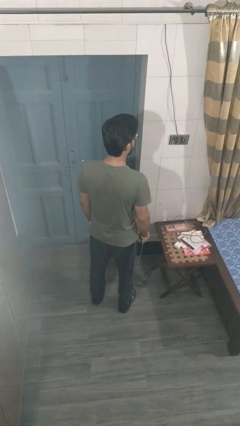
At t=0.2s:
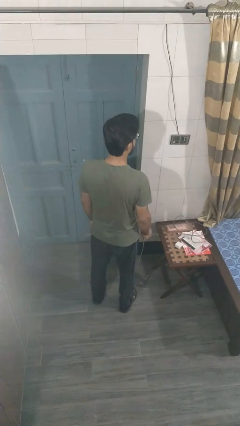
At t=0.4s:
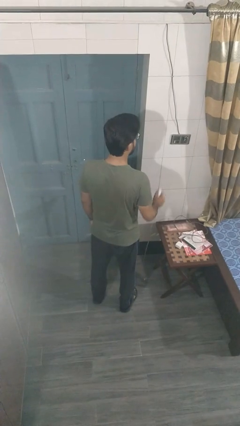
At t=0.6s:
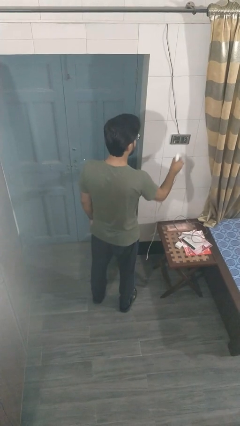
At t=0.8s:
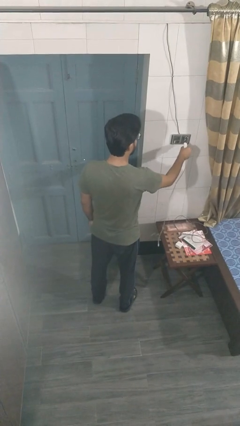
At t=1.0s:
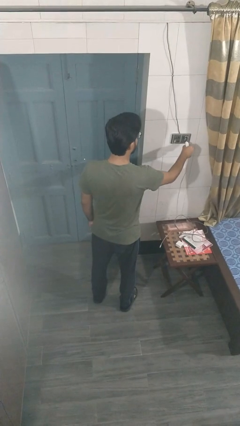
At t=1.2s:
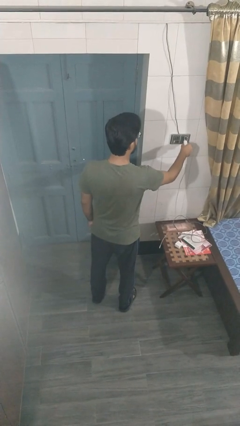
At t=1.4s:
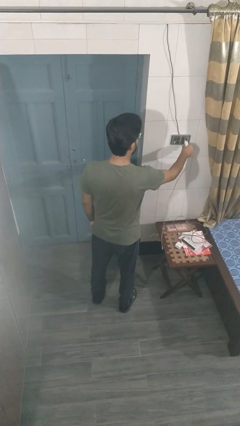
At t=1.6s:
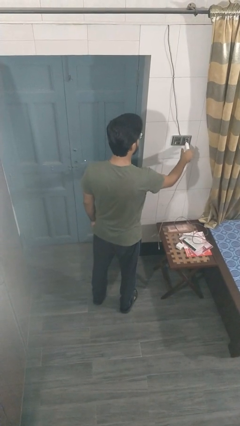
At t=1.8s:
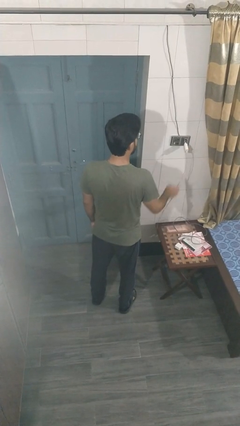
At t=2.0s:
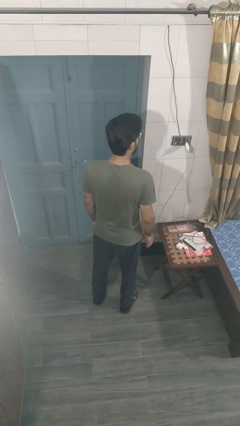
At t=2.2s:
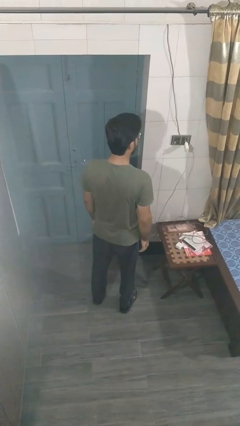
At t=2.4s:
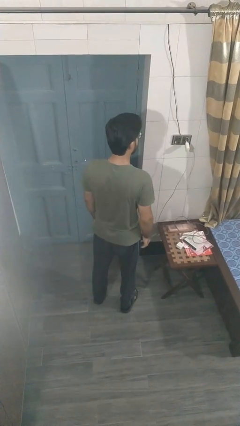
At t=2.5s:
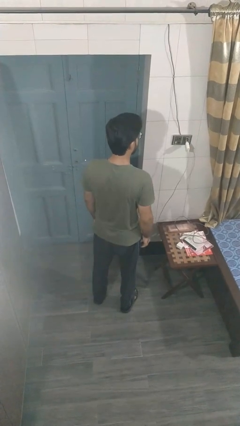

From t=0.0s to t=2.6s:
person plugs into electrical socket

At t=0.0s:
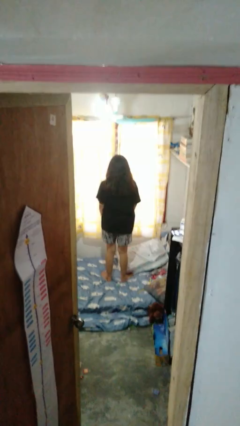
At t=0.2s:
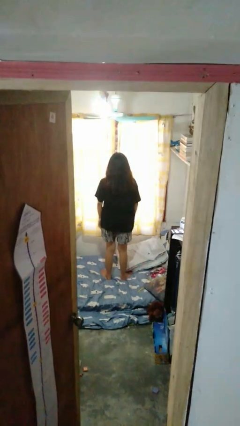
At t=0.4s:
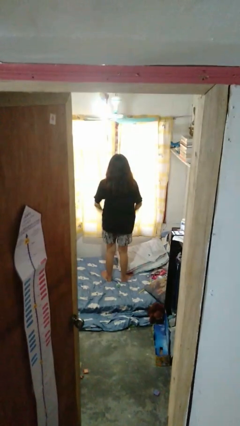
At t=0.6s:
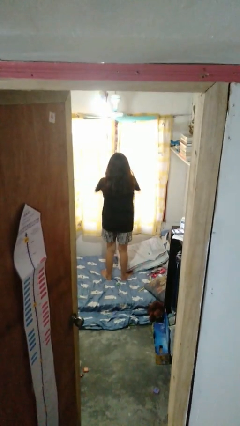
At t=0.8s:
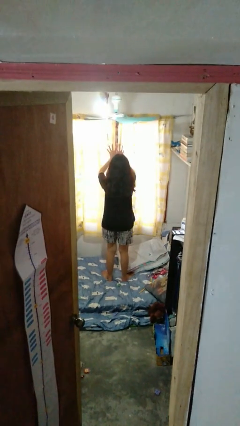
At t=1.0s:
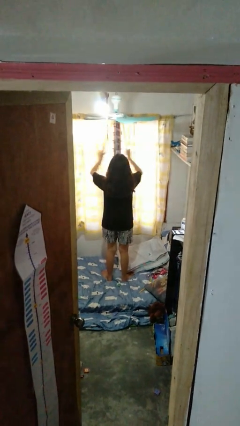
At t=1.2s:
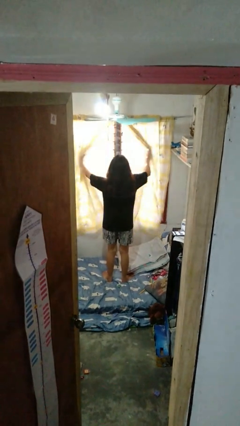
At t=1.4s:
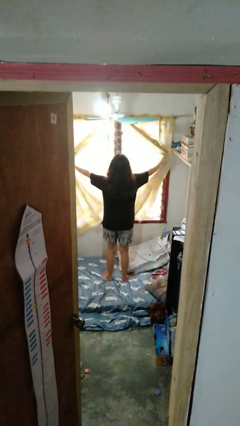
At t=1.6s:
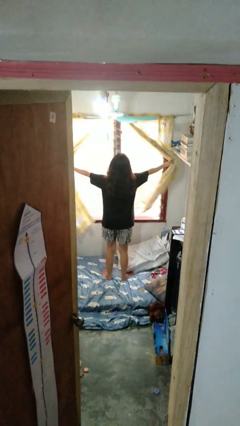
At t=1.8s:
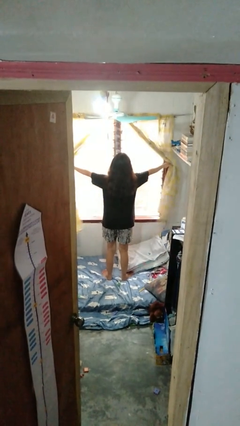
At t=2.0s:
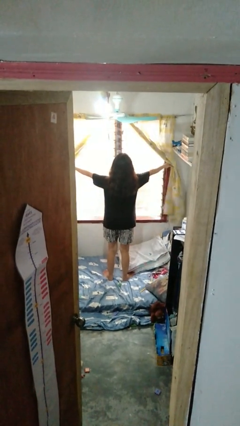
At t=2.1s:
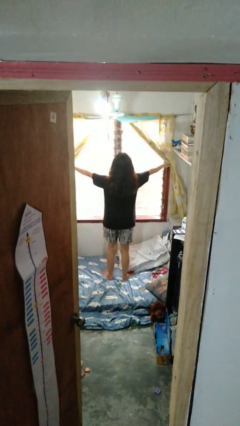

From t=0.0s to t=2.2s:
person opens curtains

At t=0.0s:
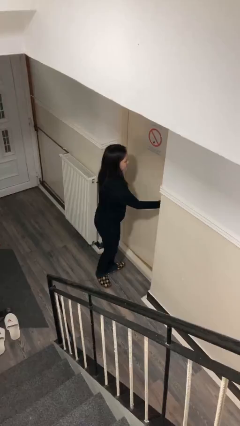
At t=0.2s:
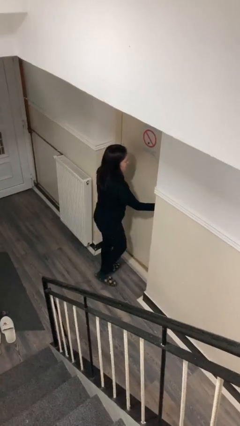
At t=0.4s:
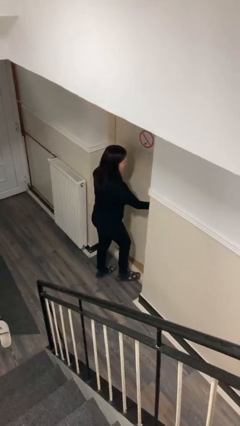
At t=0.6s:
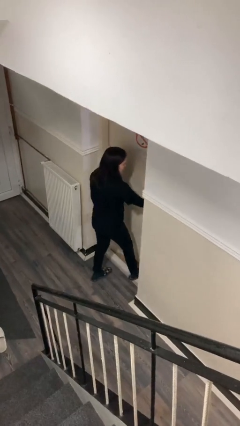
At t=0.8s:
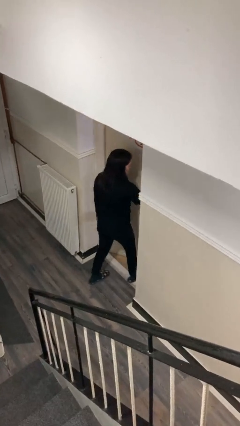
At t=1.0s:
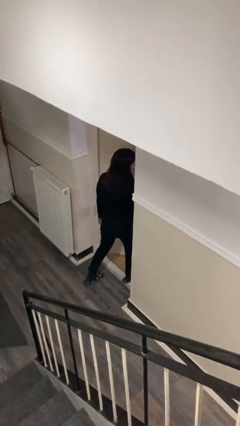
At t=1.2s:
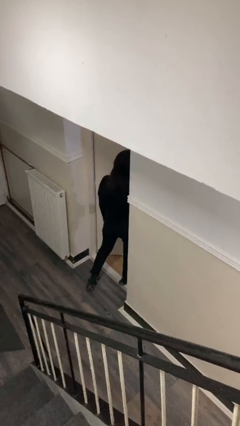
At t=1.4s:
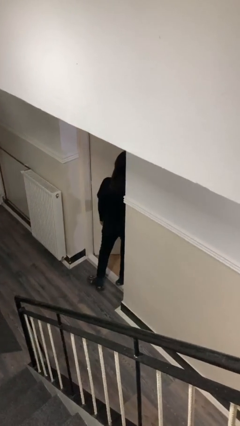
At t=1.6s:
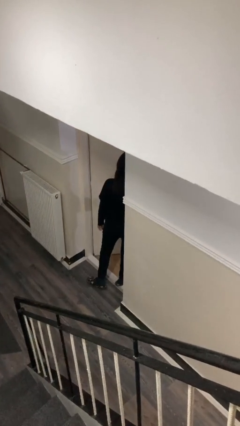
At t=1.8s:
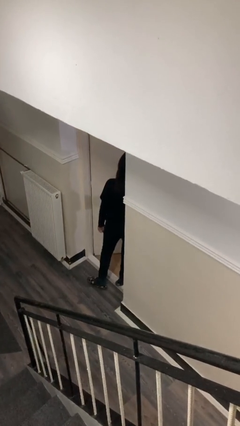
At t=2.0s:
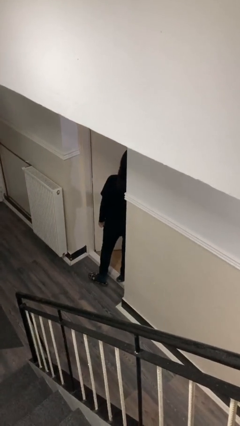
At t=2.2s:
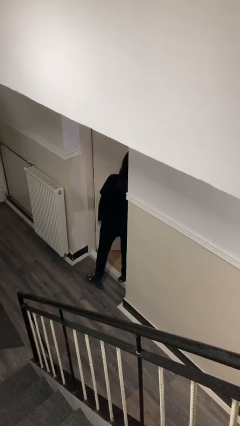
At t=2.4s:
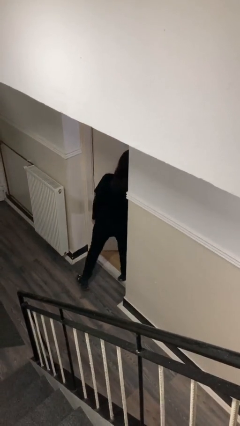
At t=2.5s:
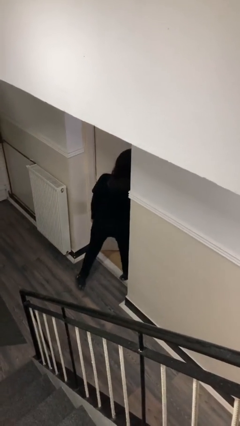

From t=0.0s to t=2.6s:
person opens facility door

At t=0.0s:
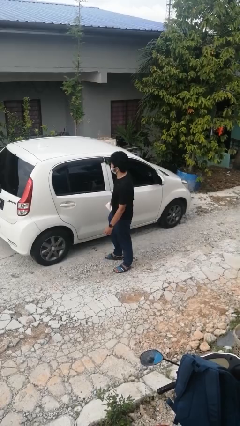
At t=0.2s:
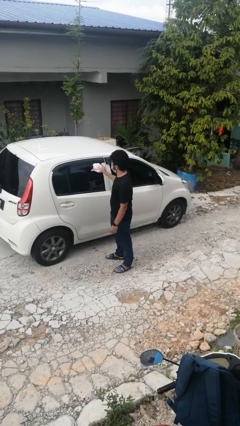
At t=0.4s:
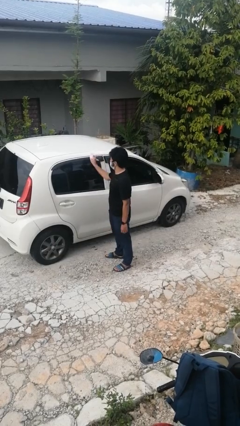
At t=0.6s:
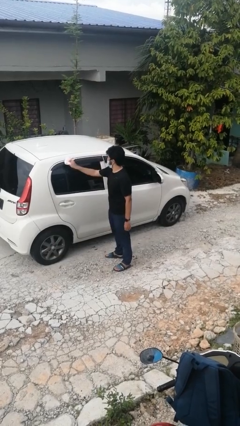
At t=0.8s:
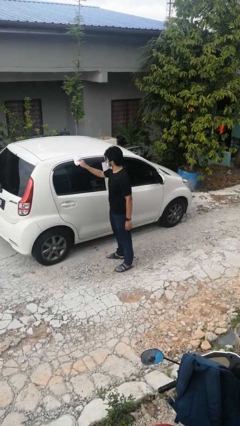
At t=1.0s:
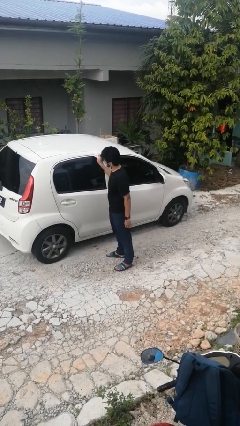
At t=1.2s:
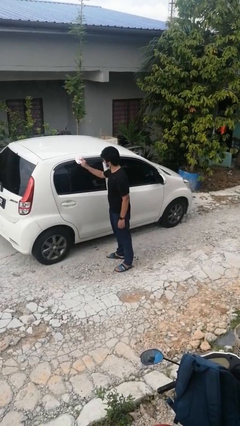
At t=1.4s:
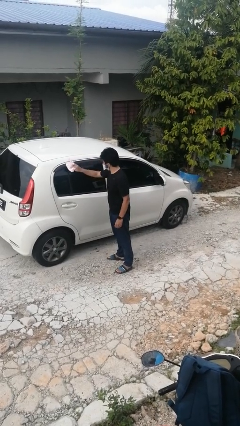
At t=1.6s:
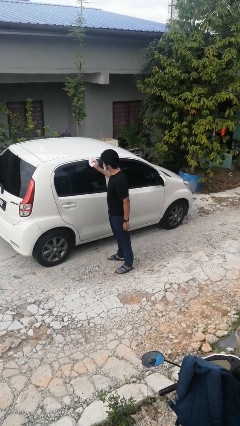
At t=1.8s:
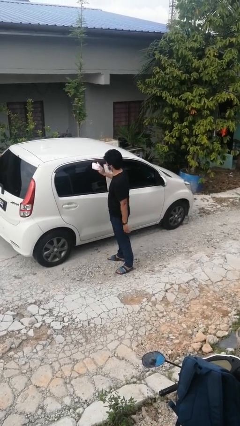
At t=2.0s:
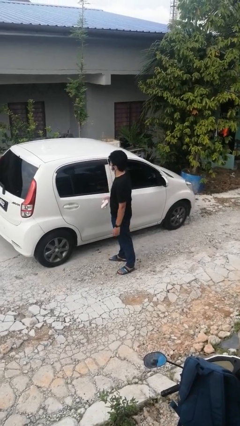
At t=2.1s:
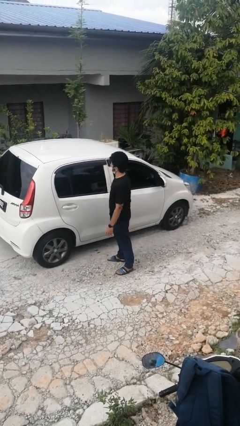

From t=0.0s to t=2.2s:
person polishes car with rag

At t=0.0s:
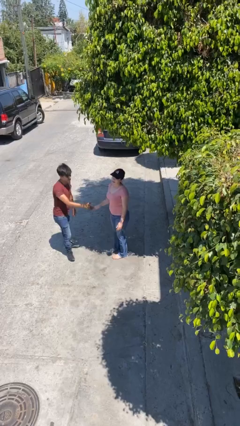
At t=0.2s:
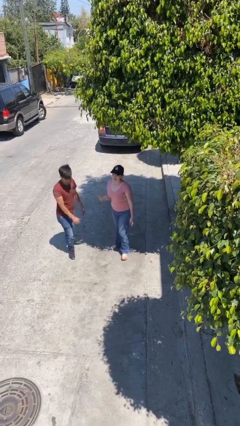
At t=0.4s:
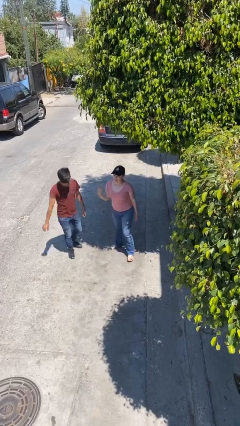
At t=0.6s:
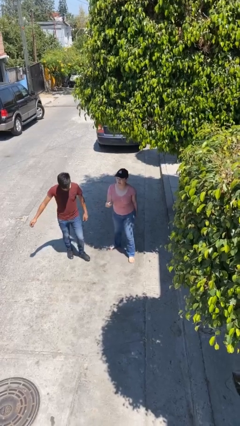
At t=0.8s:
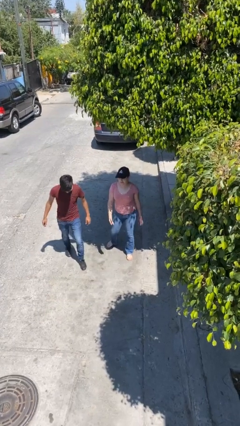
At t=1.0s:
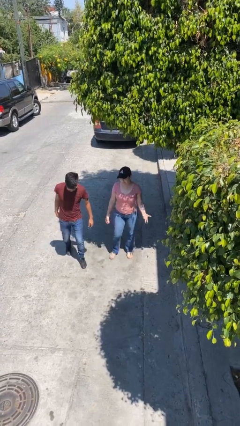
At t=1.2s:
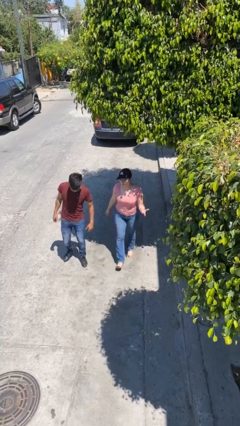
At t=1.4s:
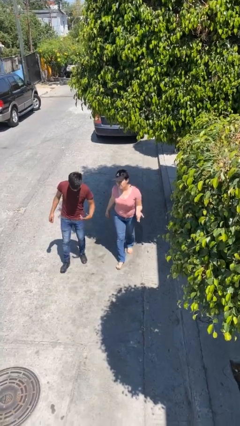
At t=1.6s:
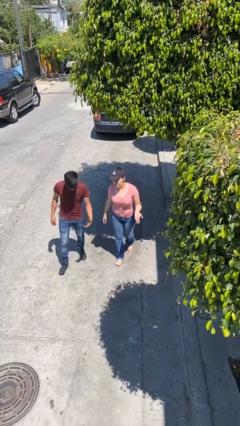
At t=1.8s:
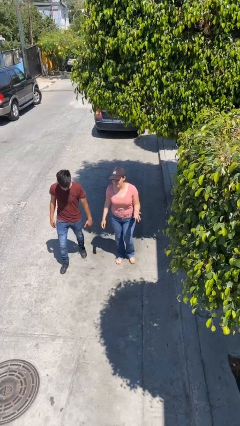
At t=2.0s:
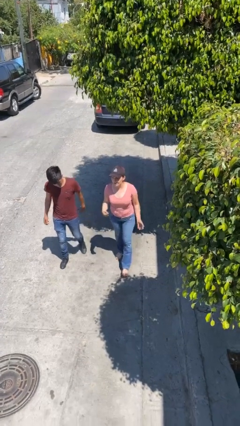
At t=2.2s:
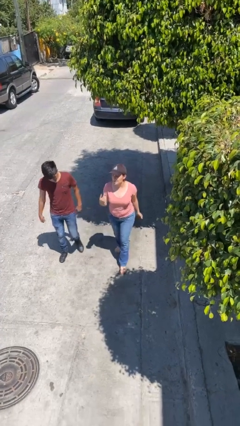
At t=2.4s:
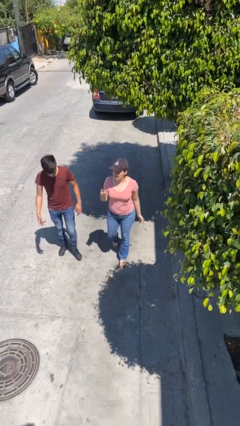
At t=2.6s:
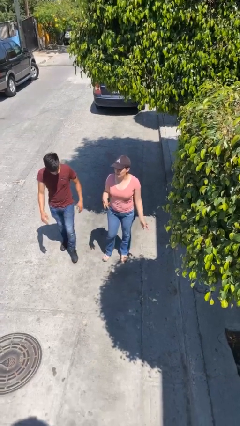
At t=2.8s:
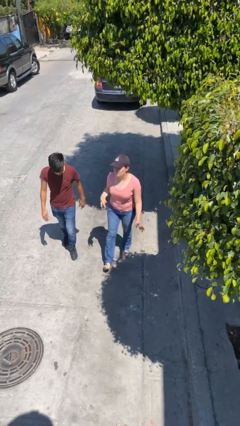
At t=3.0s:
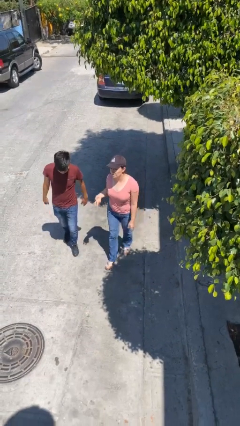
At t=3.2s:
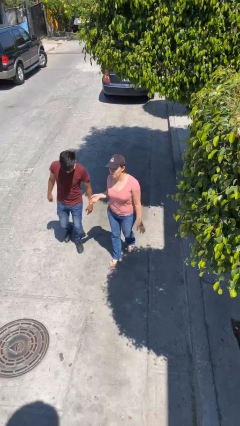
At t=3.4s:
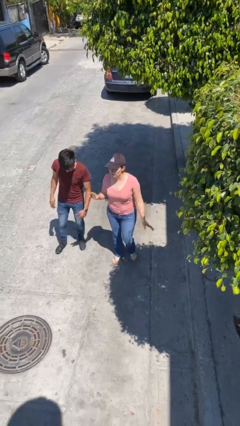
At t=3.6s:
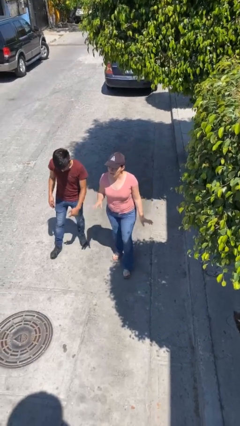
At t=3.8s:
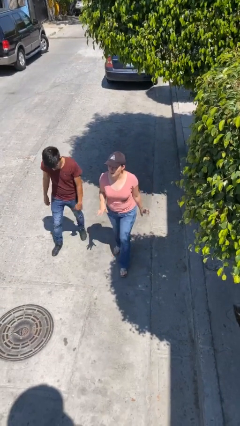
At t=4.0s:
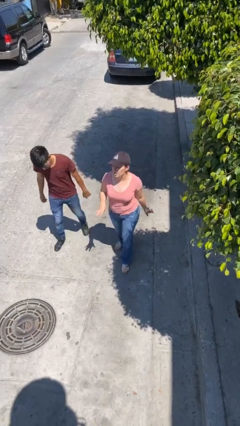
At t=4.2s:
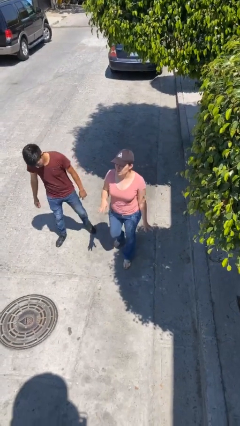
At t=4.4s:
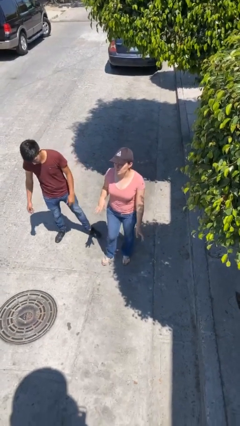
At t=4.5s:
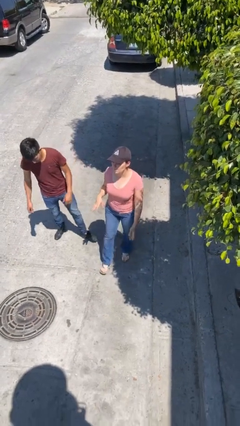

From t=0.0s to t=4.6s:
person talks to person

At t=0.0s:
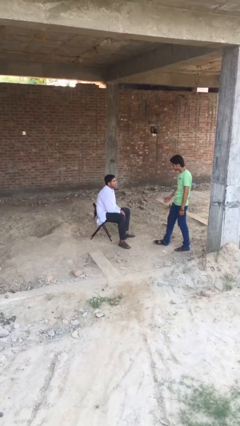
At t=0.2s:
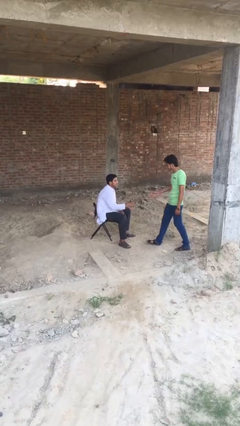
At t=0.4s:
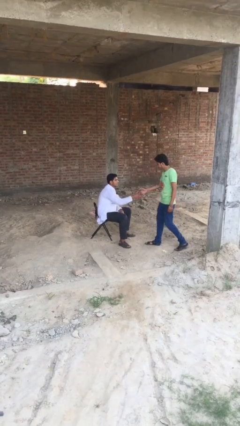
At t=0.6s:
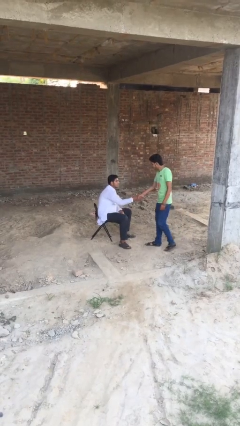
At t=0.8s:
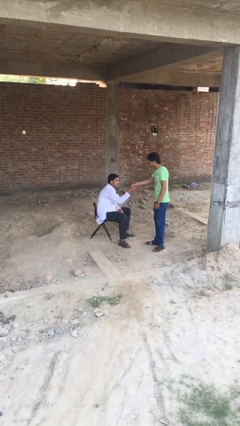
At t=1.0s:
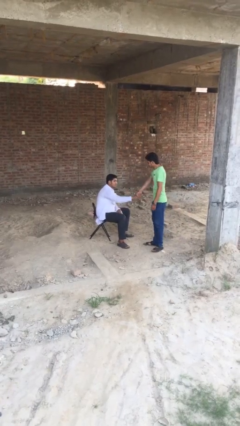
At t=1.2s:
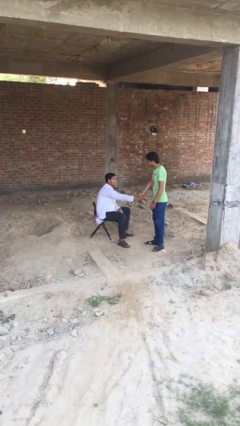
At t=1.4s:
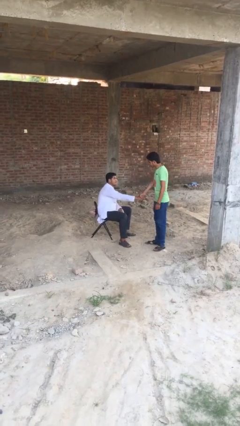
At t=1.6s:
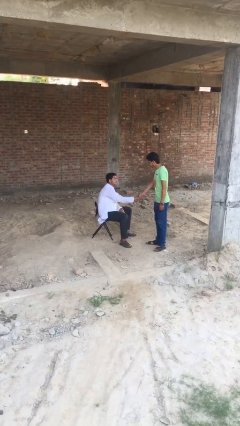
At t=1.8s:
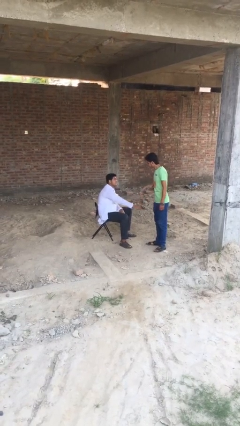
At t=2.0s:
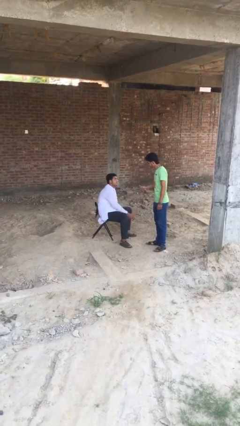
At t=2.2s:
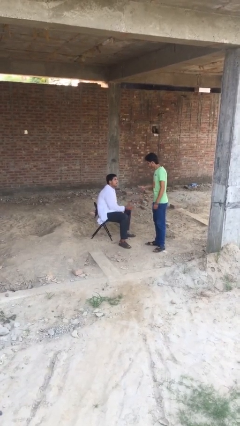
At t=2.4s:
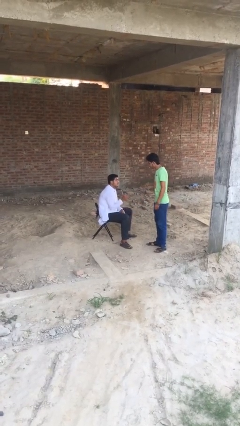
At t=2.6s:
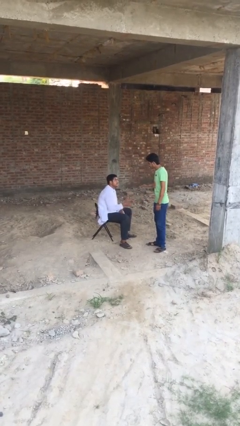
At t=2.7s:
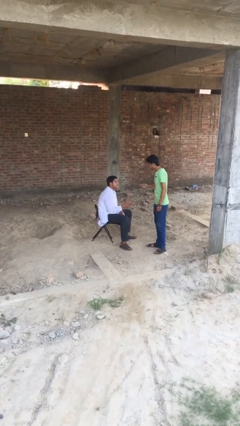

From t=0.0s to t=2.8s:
person shakes hand
